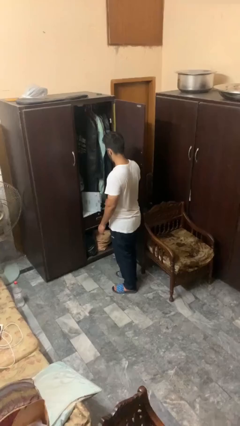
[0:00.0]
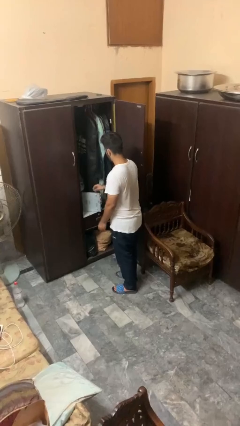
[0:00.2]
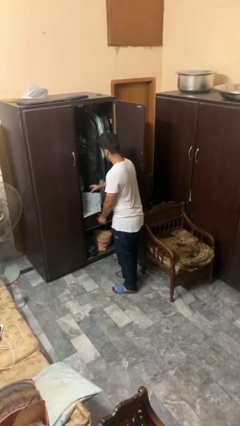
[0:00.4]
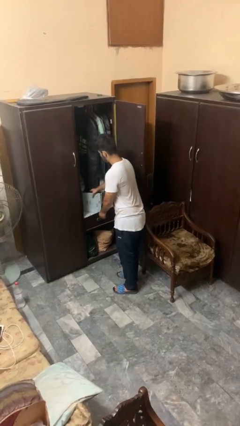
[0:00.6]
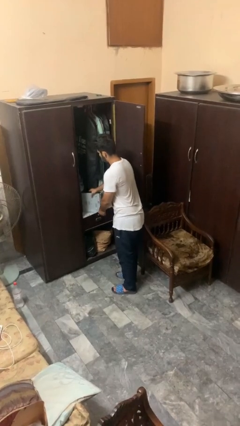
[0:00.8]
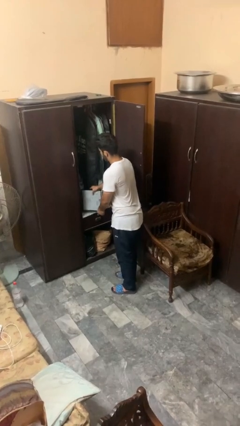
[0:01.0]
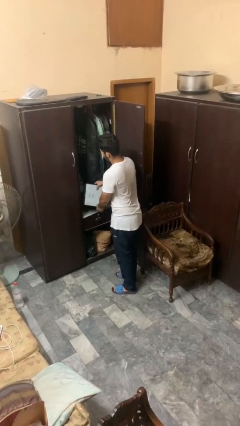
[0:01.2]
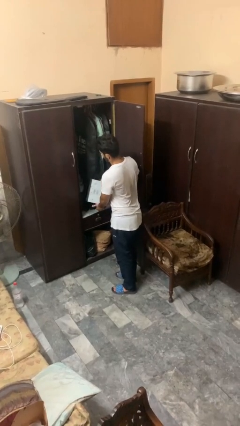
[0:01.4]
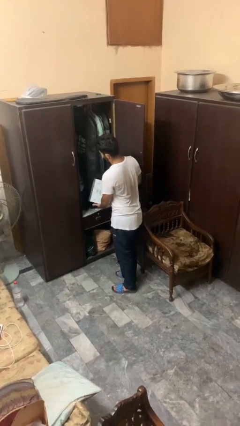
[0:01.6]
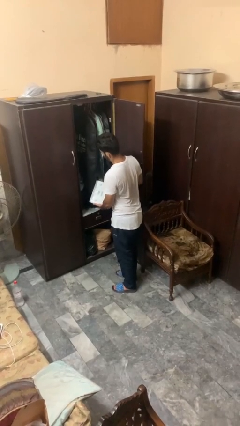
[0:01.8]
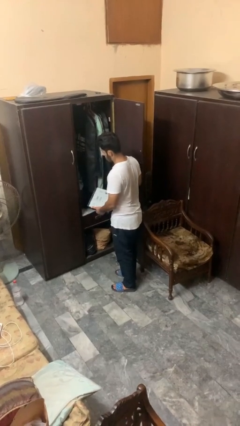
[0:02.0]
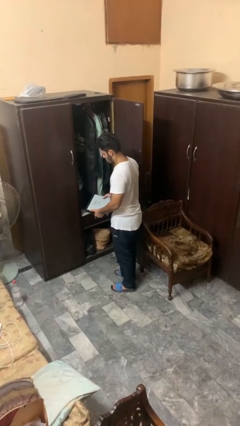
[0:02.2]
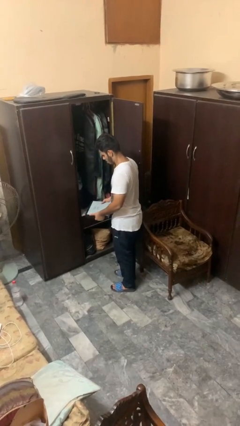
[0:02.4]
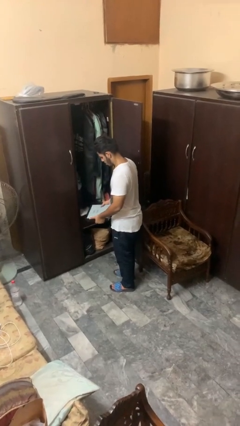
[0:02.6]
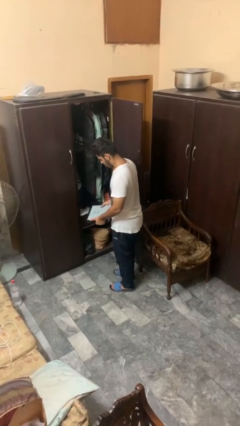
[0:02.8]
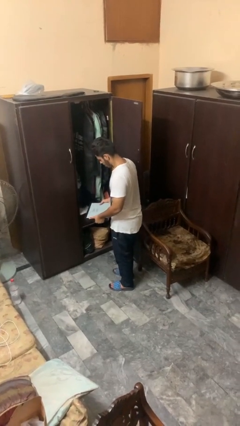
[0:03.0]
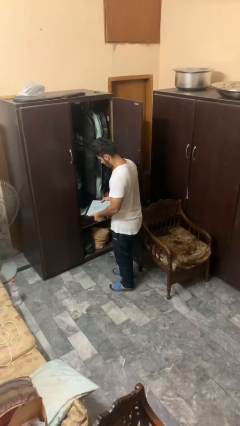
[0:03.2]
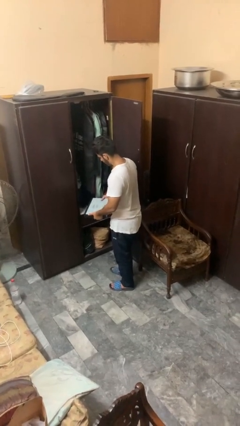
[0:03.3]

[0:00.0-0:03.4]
person picks up object from countertop

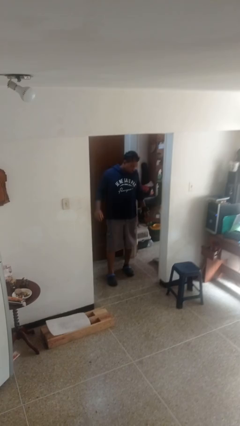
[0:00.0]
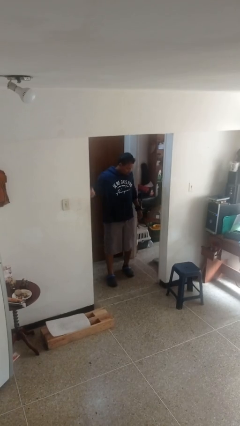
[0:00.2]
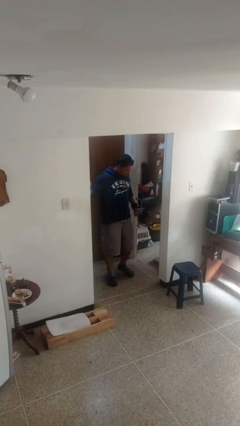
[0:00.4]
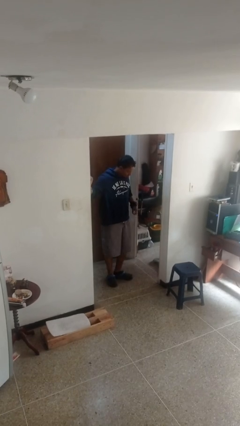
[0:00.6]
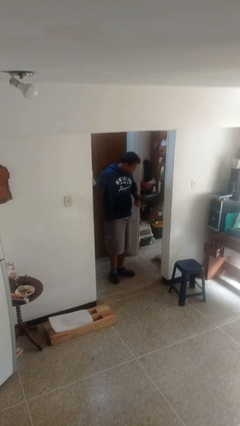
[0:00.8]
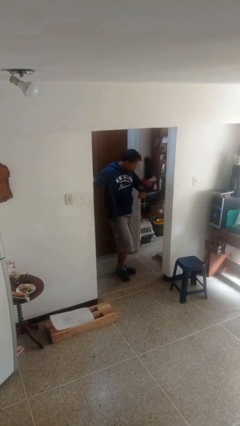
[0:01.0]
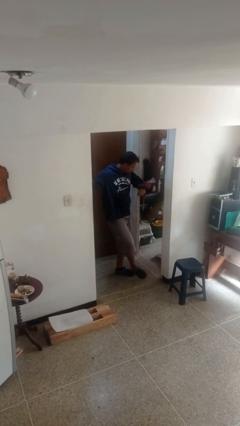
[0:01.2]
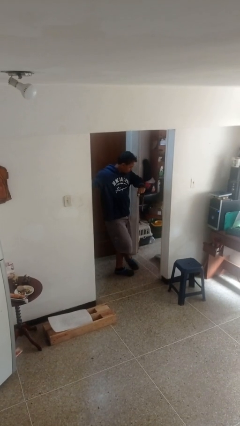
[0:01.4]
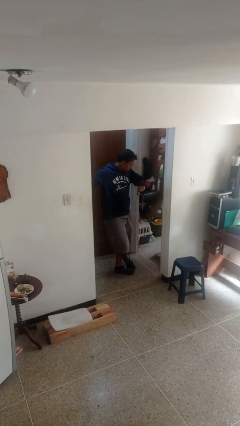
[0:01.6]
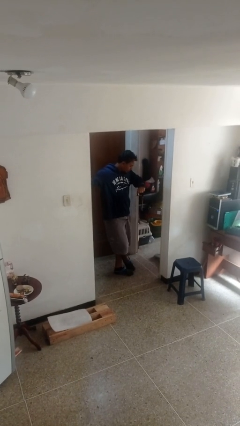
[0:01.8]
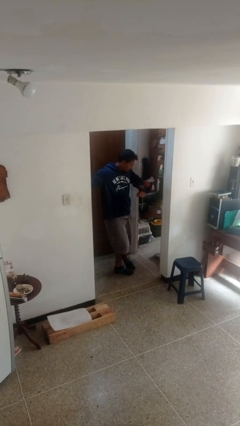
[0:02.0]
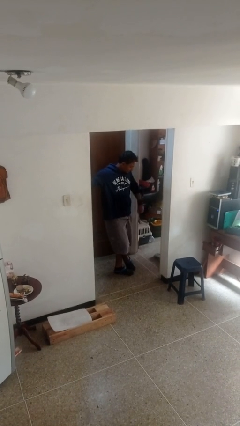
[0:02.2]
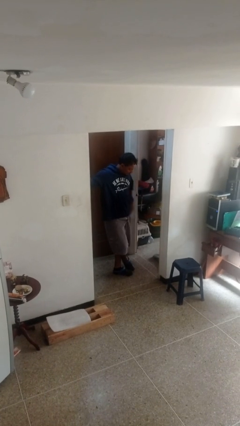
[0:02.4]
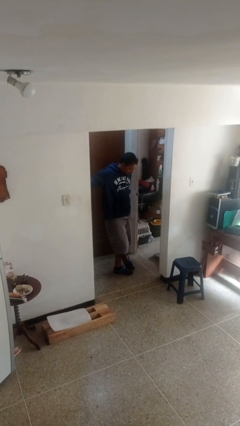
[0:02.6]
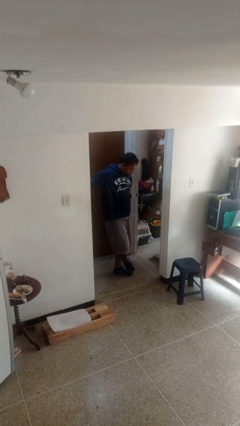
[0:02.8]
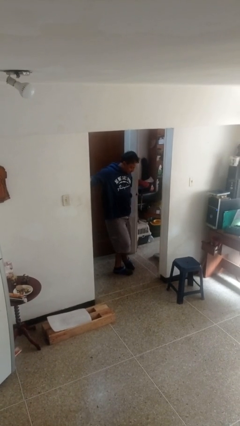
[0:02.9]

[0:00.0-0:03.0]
person looks at wristwatch

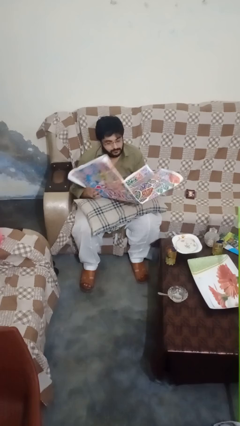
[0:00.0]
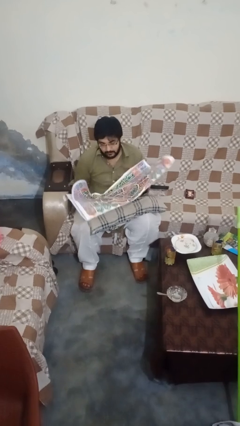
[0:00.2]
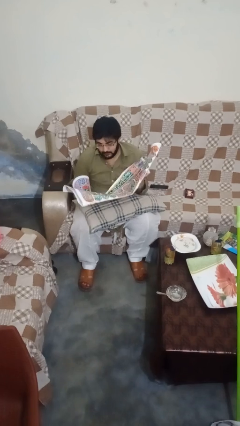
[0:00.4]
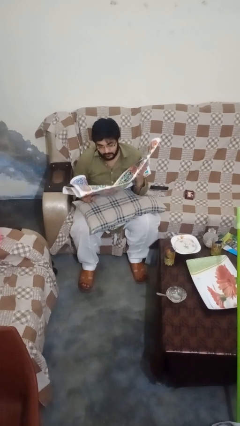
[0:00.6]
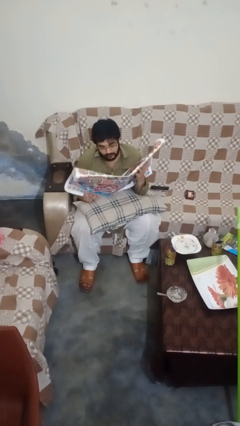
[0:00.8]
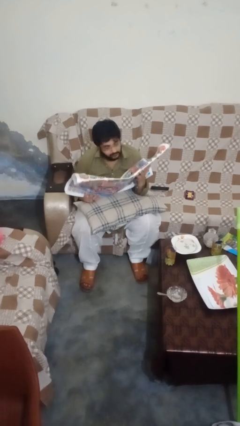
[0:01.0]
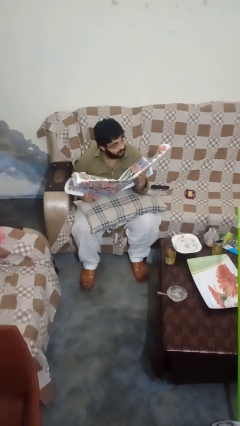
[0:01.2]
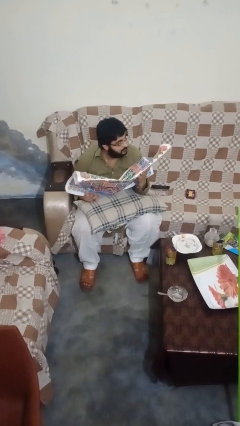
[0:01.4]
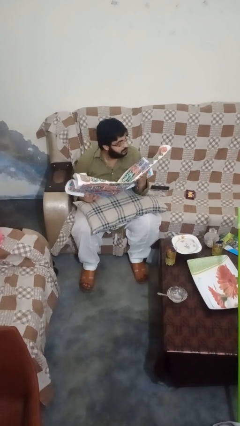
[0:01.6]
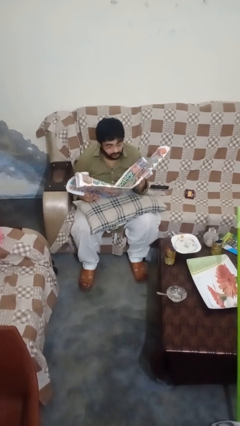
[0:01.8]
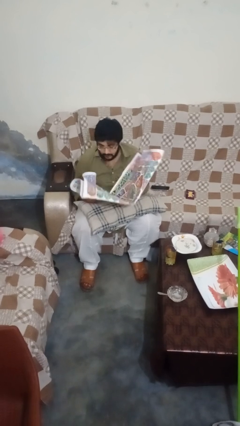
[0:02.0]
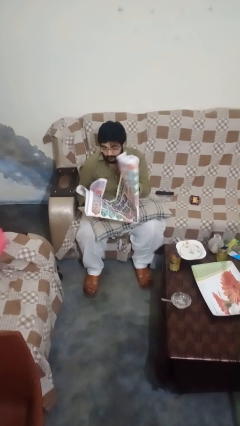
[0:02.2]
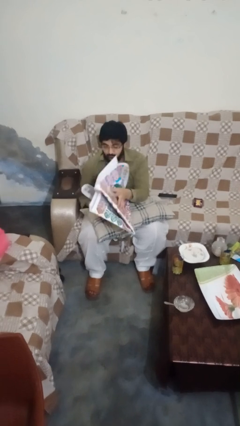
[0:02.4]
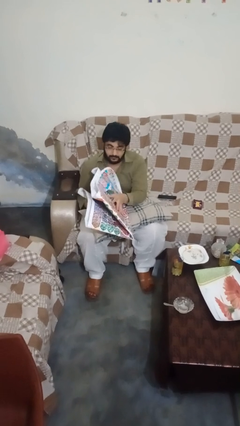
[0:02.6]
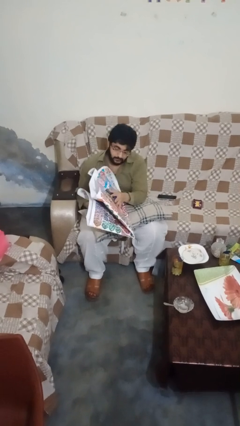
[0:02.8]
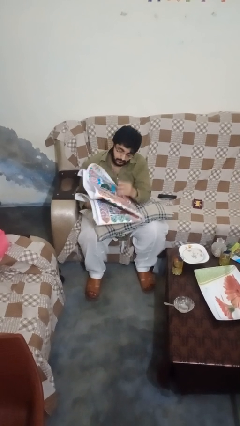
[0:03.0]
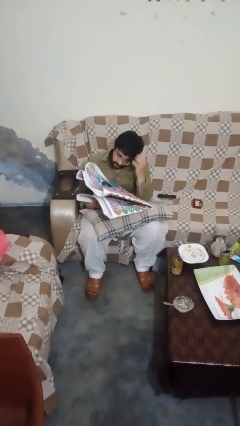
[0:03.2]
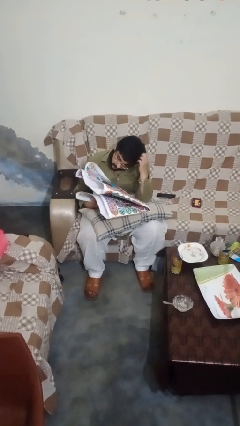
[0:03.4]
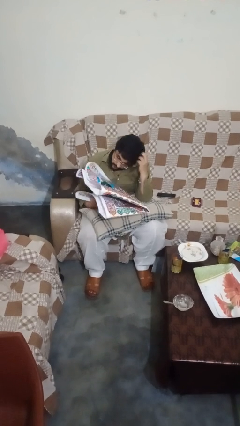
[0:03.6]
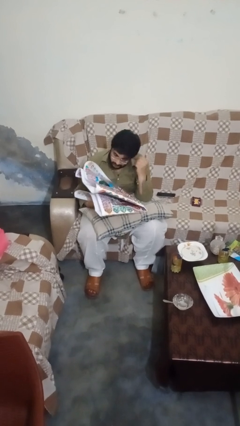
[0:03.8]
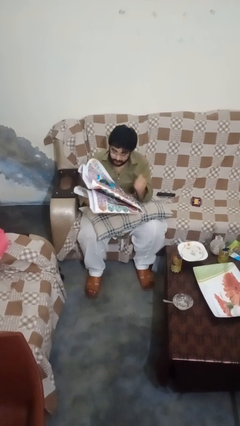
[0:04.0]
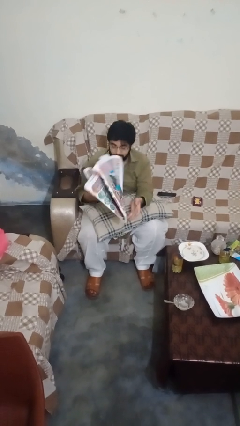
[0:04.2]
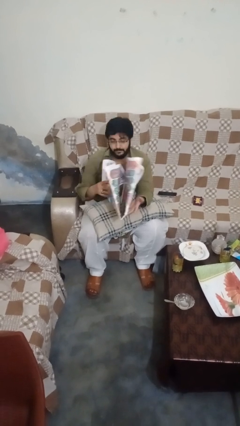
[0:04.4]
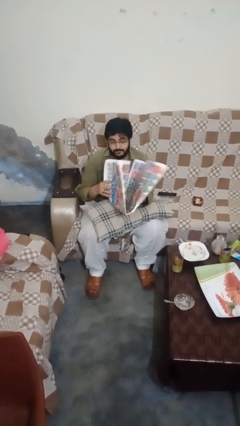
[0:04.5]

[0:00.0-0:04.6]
person reads newspaper

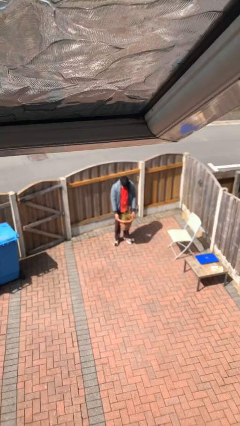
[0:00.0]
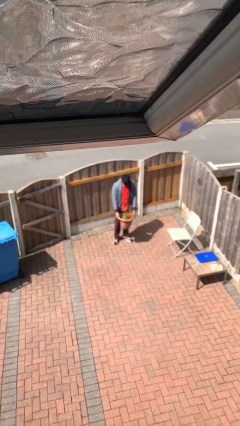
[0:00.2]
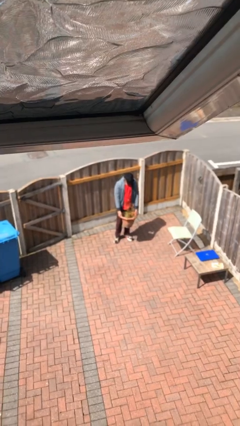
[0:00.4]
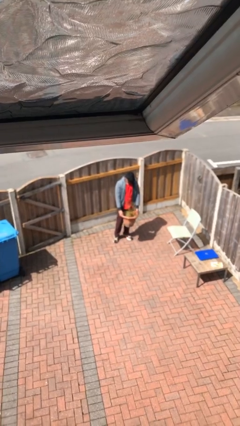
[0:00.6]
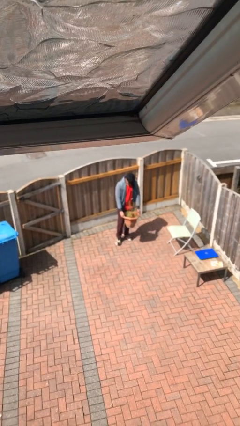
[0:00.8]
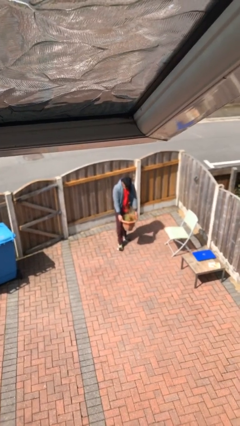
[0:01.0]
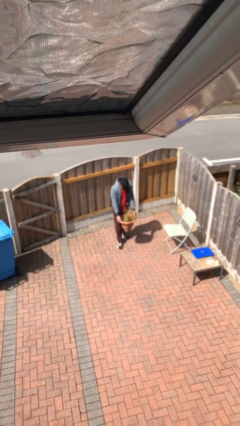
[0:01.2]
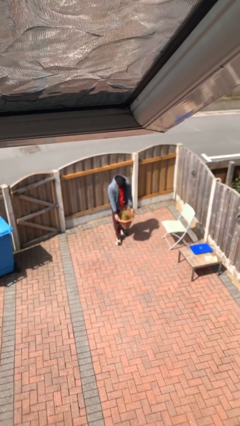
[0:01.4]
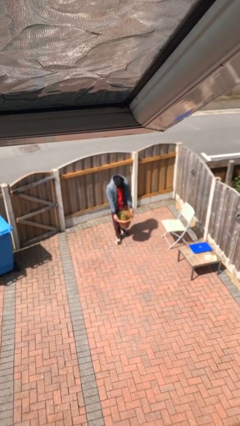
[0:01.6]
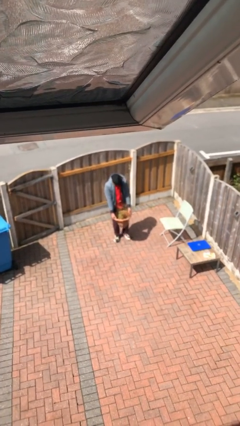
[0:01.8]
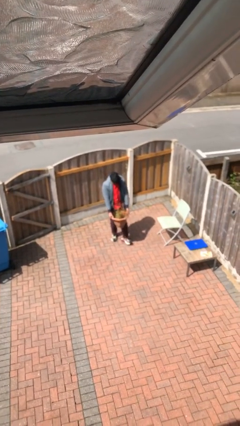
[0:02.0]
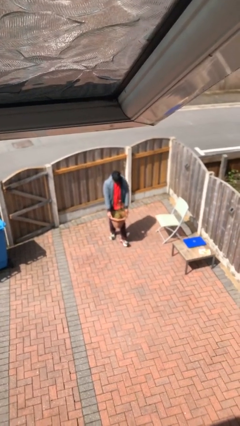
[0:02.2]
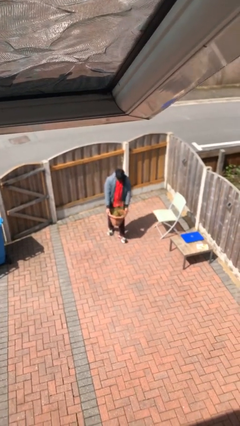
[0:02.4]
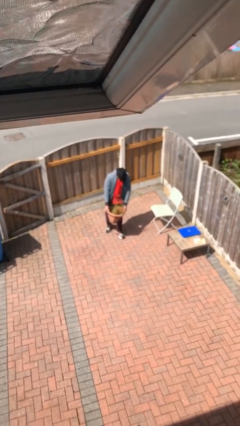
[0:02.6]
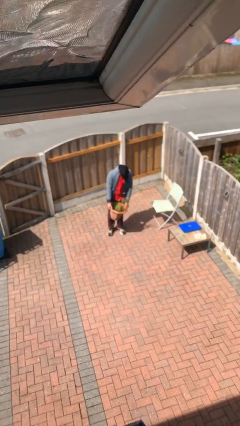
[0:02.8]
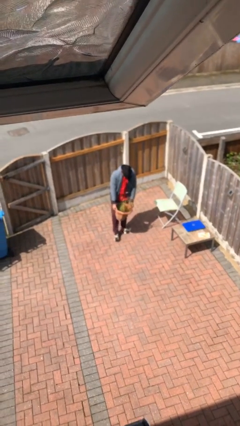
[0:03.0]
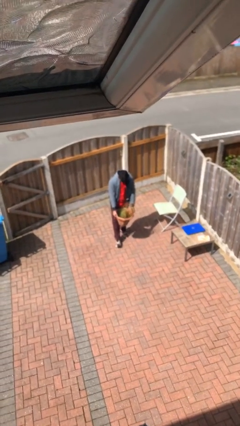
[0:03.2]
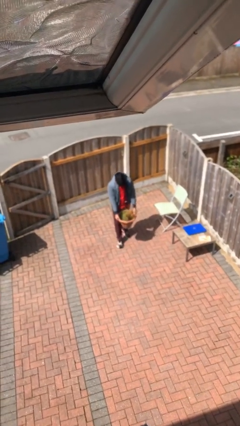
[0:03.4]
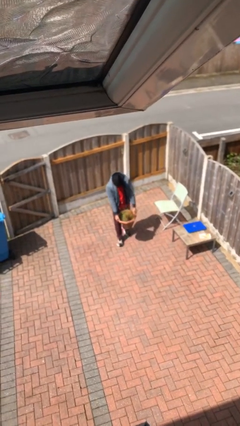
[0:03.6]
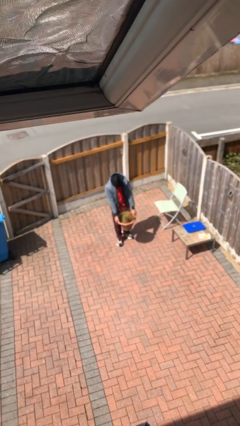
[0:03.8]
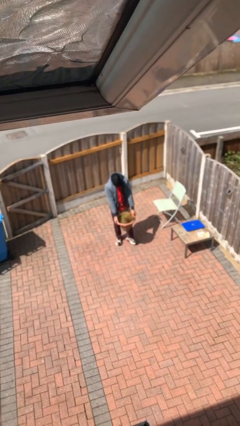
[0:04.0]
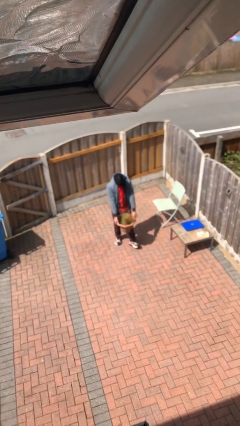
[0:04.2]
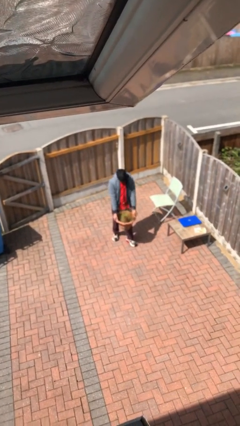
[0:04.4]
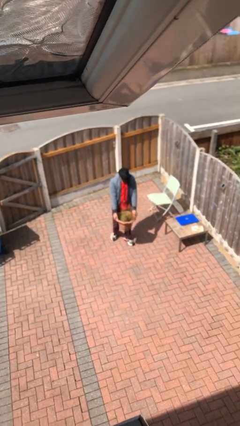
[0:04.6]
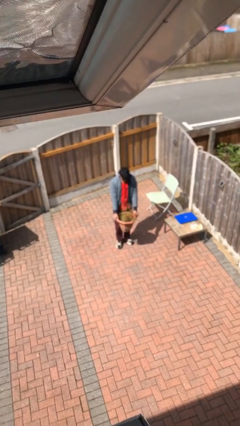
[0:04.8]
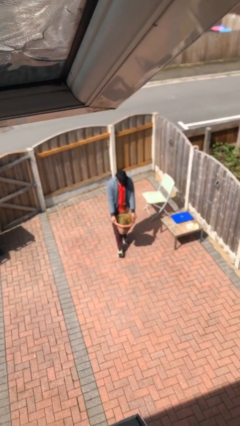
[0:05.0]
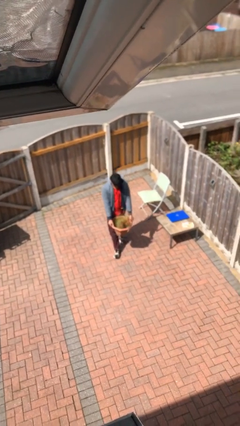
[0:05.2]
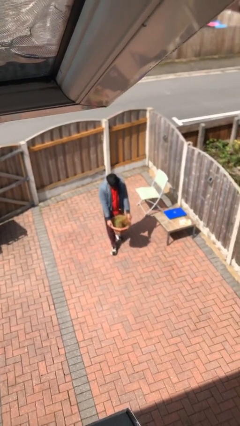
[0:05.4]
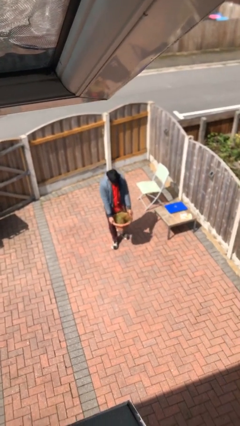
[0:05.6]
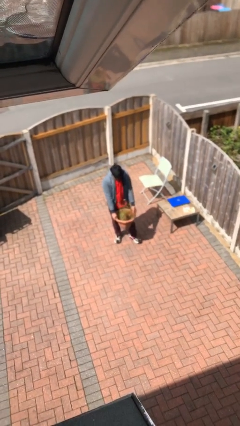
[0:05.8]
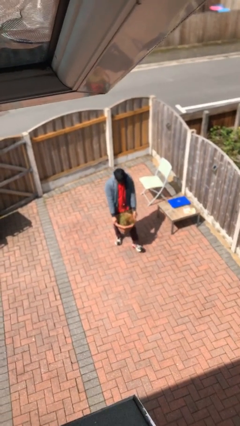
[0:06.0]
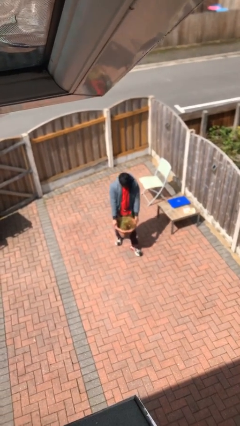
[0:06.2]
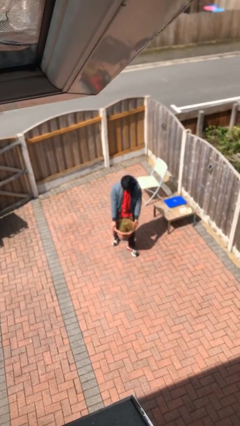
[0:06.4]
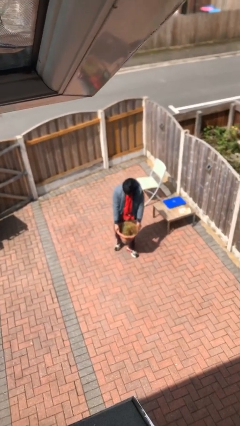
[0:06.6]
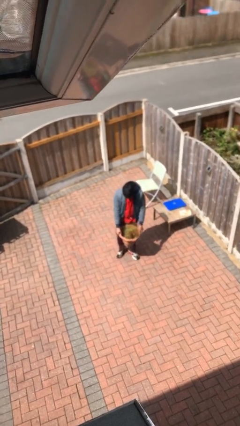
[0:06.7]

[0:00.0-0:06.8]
person carries heavy object
